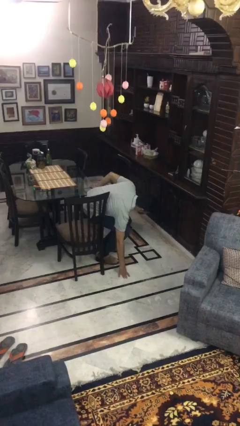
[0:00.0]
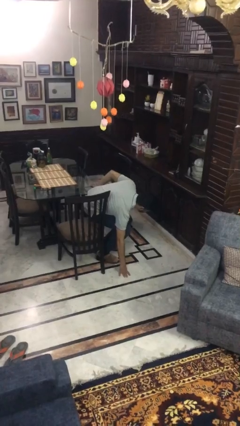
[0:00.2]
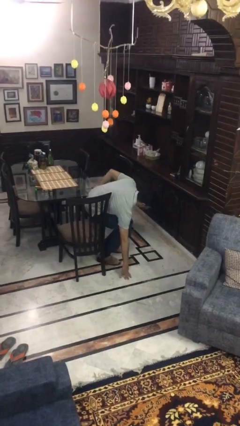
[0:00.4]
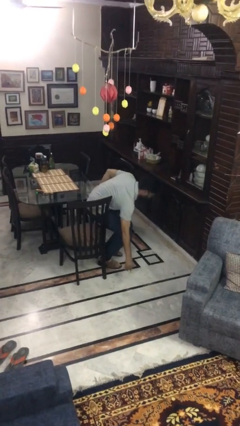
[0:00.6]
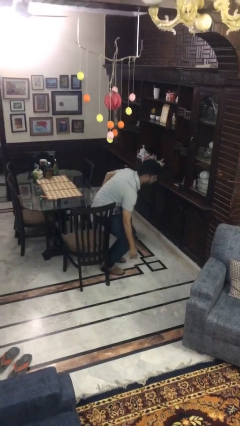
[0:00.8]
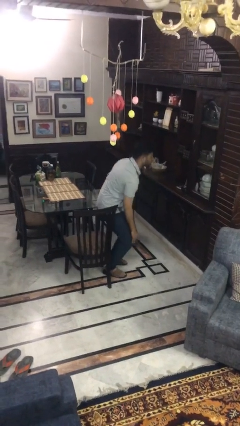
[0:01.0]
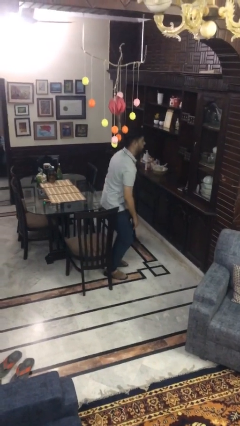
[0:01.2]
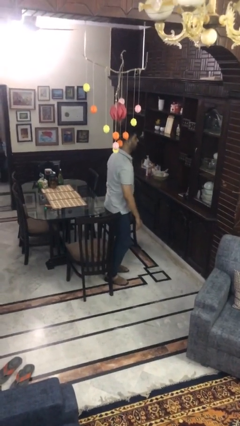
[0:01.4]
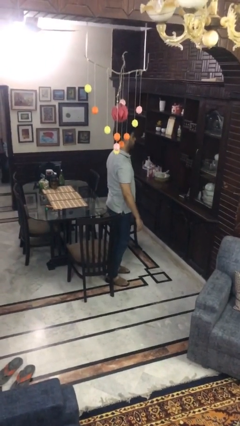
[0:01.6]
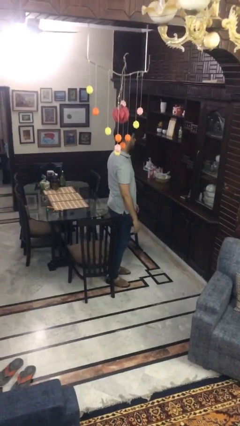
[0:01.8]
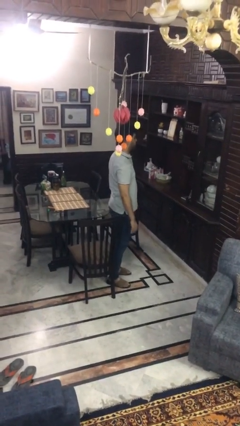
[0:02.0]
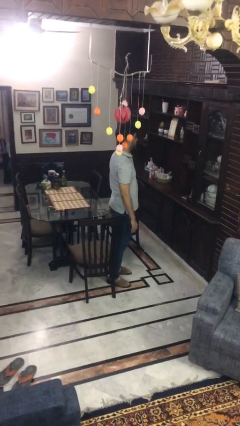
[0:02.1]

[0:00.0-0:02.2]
person stands up from floor

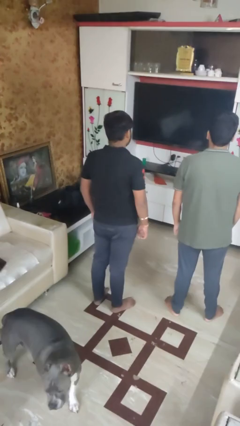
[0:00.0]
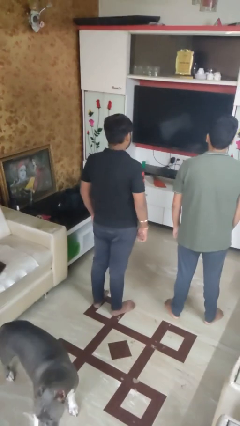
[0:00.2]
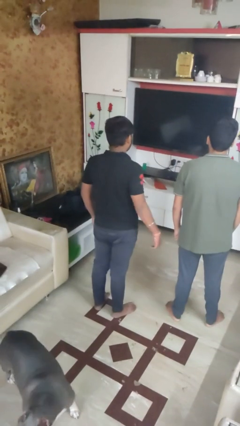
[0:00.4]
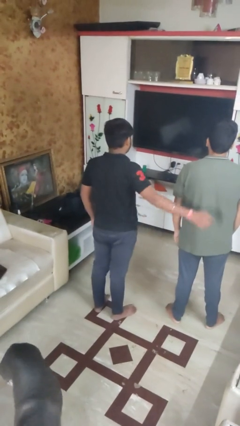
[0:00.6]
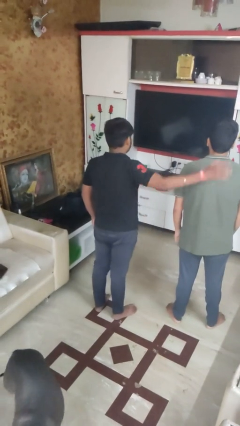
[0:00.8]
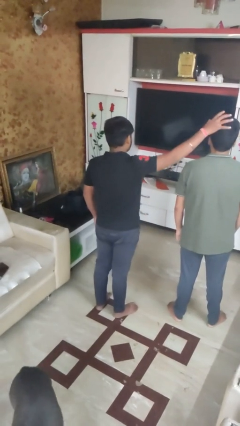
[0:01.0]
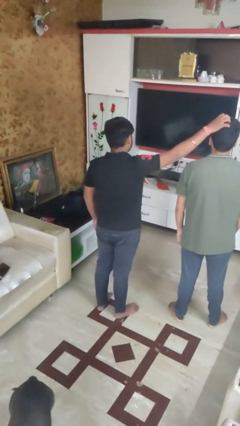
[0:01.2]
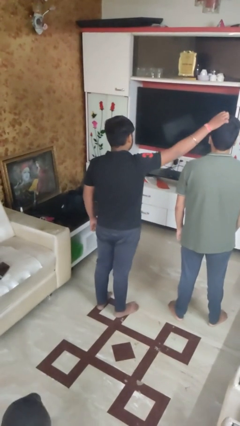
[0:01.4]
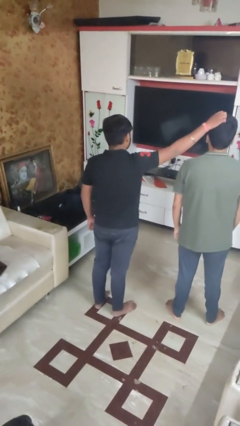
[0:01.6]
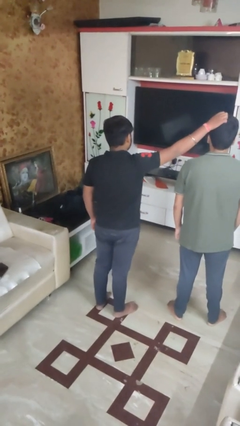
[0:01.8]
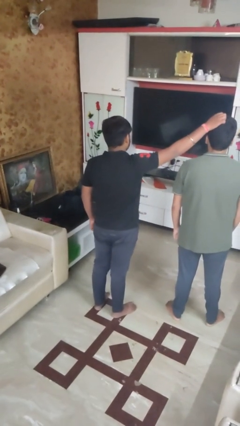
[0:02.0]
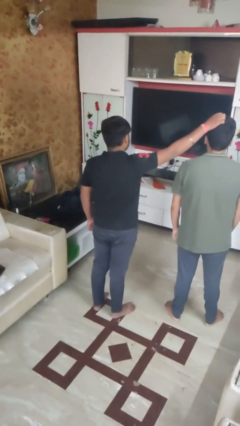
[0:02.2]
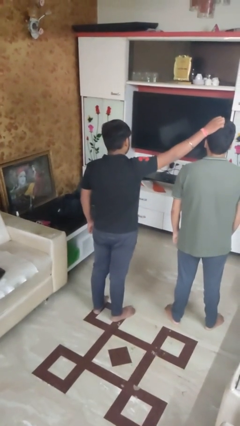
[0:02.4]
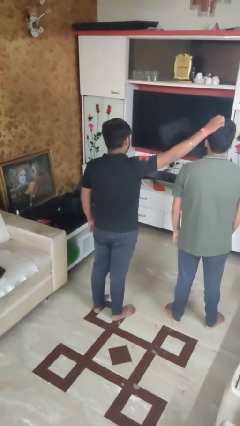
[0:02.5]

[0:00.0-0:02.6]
person grabs person by hair

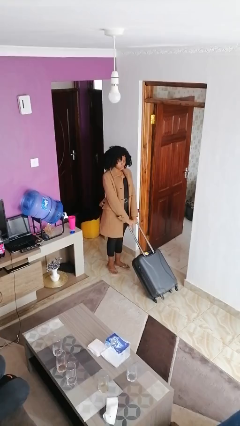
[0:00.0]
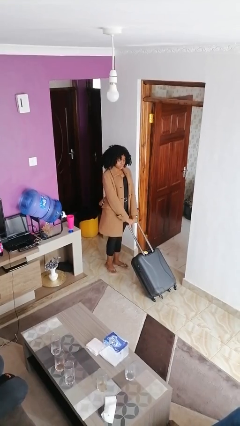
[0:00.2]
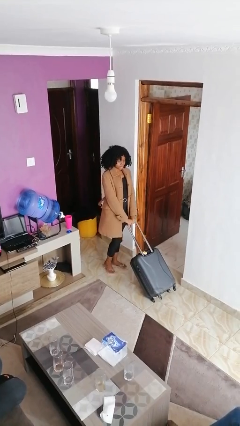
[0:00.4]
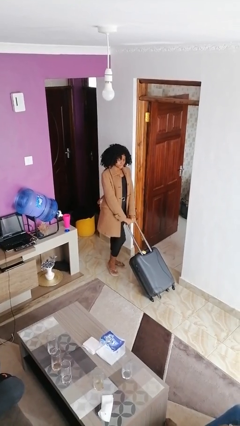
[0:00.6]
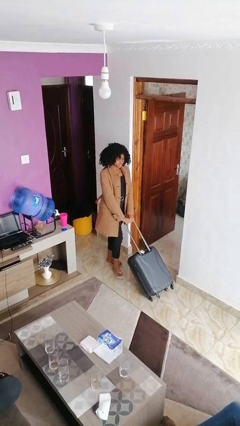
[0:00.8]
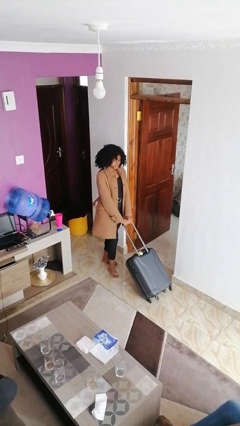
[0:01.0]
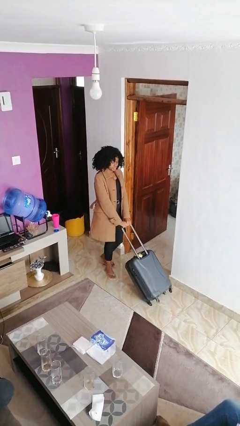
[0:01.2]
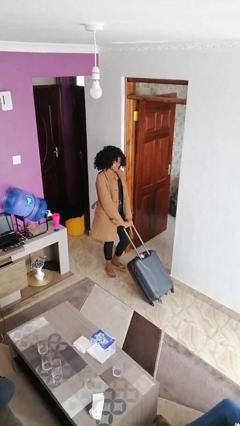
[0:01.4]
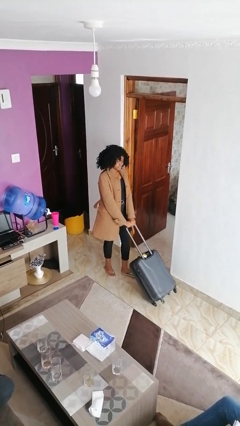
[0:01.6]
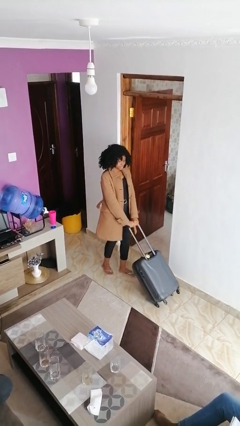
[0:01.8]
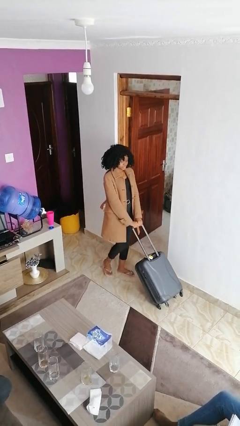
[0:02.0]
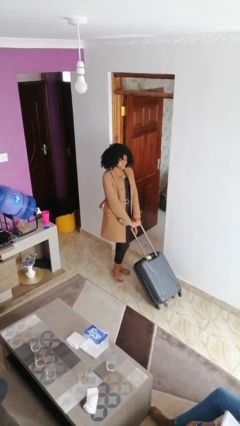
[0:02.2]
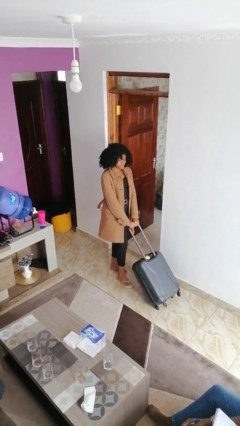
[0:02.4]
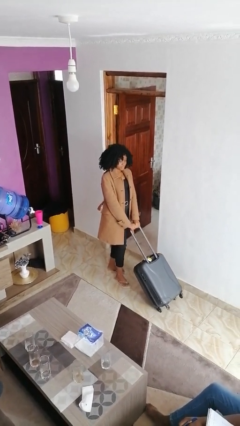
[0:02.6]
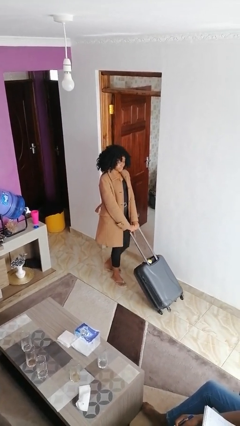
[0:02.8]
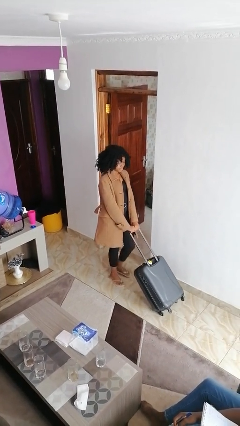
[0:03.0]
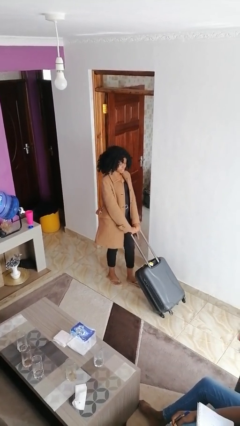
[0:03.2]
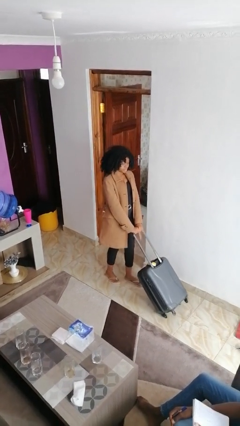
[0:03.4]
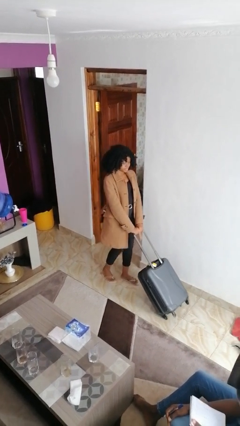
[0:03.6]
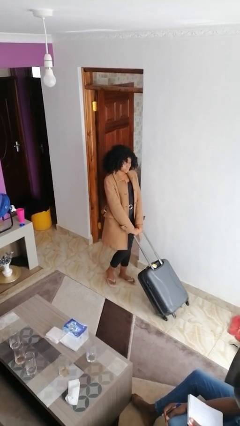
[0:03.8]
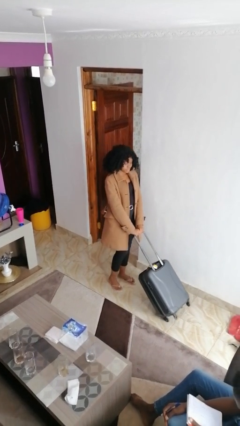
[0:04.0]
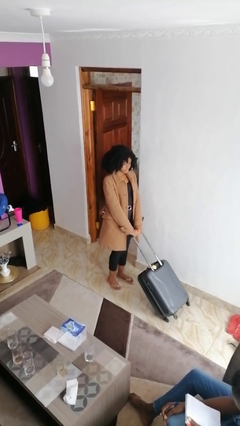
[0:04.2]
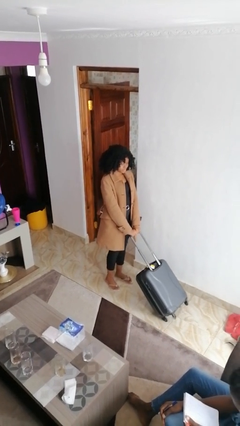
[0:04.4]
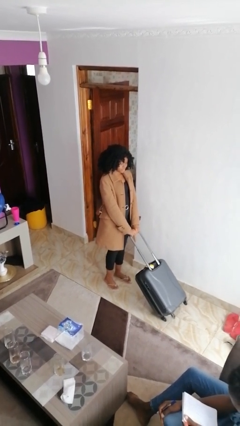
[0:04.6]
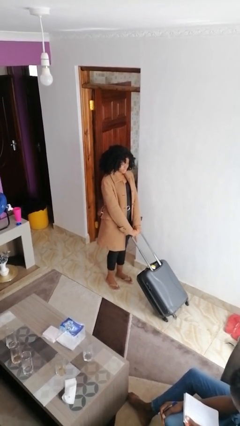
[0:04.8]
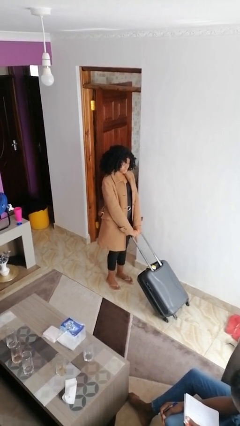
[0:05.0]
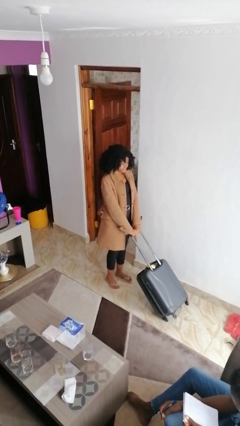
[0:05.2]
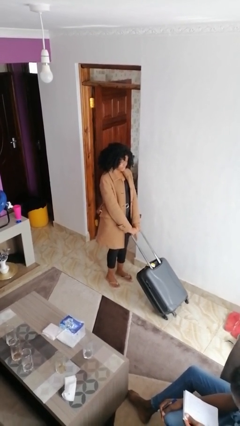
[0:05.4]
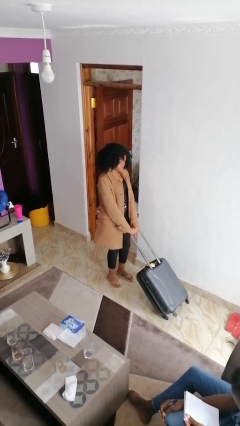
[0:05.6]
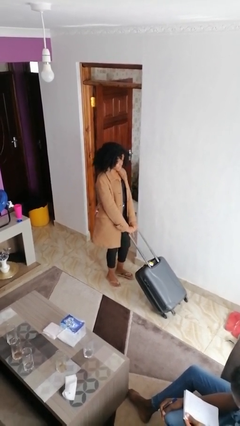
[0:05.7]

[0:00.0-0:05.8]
person pushes wheeled cart

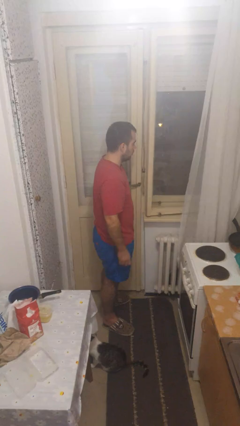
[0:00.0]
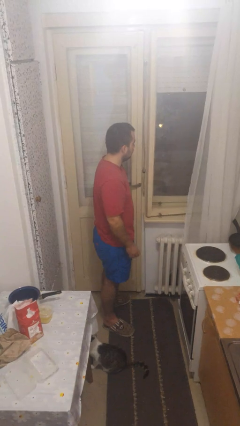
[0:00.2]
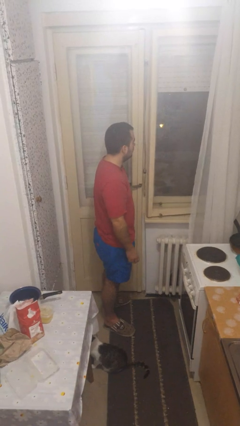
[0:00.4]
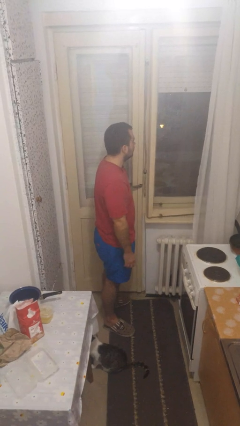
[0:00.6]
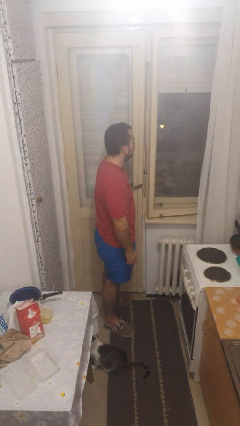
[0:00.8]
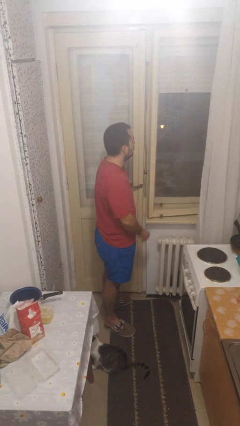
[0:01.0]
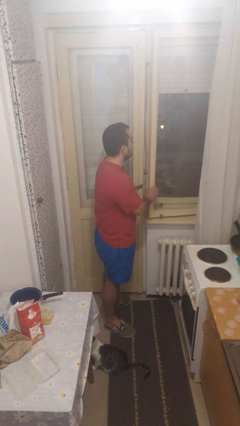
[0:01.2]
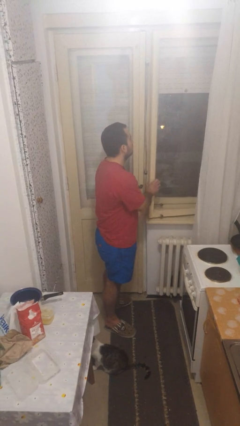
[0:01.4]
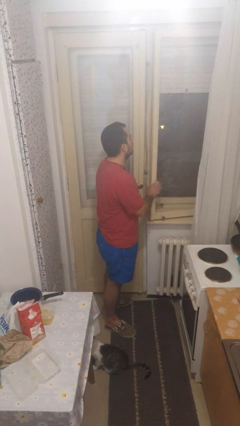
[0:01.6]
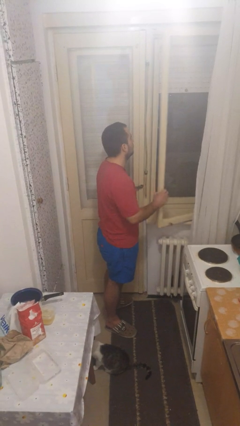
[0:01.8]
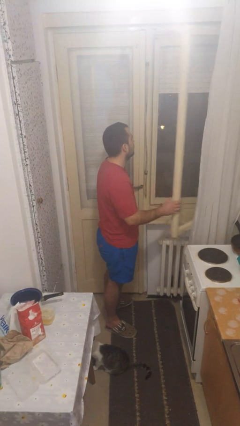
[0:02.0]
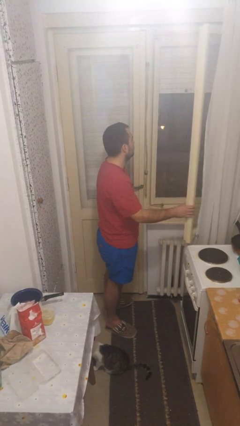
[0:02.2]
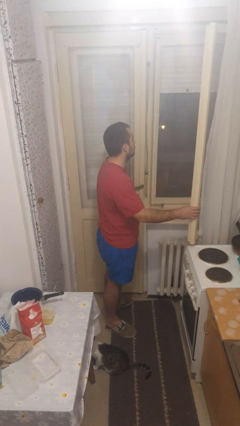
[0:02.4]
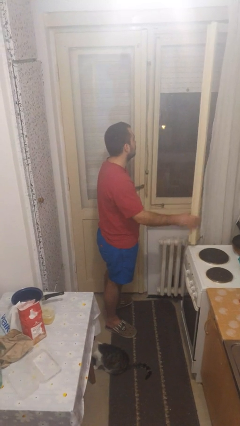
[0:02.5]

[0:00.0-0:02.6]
person opens home window

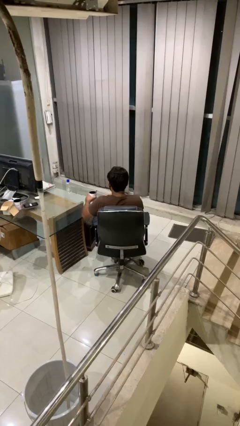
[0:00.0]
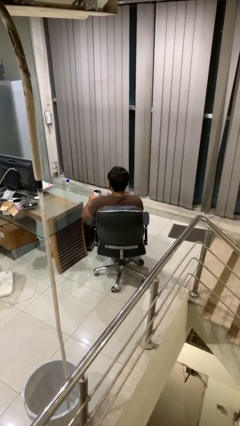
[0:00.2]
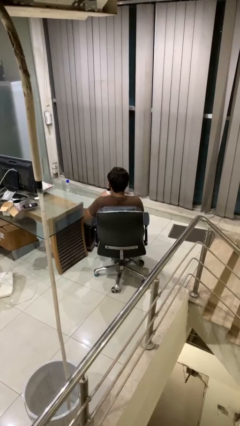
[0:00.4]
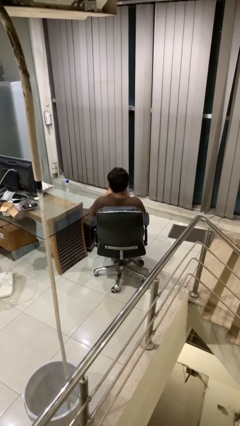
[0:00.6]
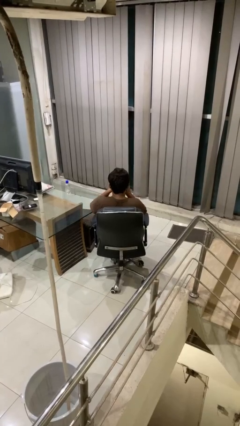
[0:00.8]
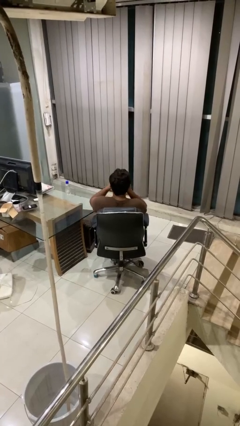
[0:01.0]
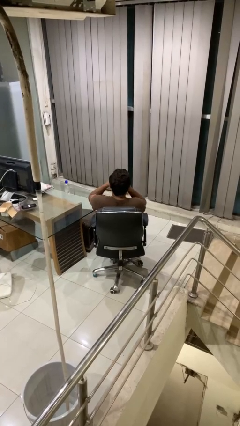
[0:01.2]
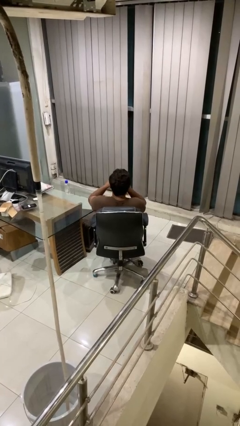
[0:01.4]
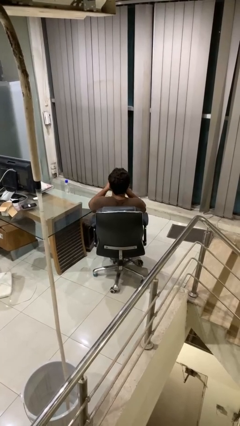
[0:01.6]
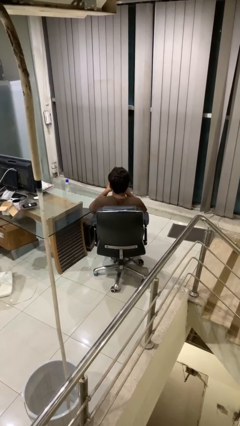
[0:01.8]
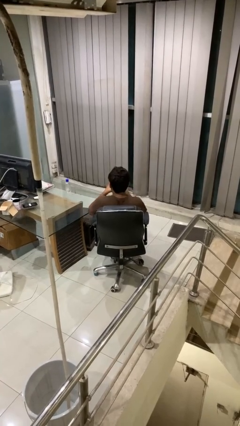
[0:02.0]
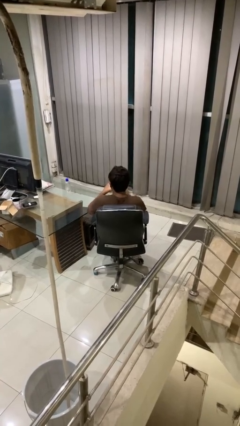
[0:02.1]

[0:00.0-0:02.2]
person drinks from mug

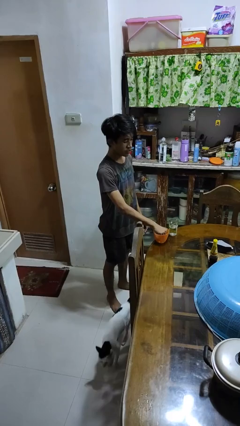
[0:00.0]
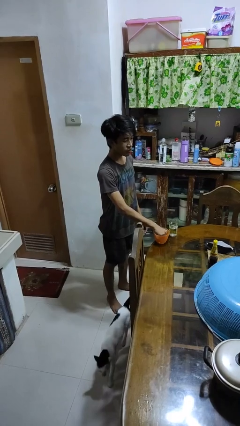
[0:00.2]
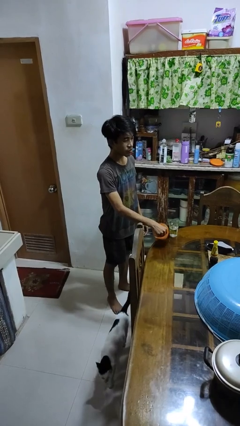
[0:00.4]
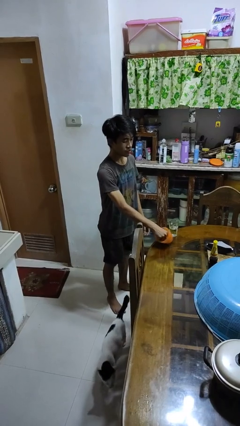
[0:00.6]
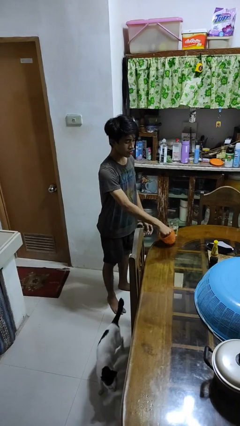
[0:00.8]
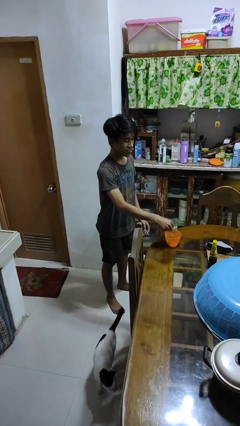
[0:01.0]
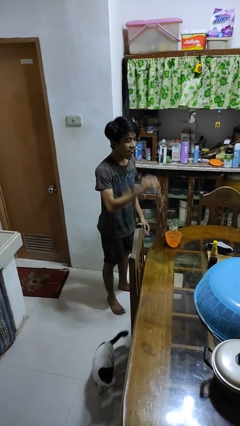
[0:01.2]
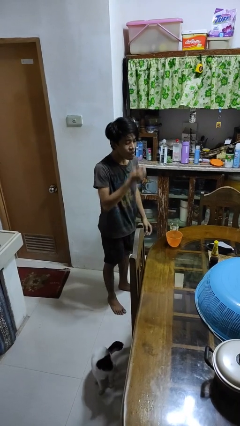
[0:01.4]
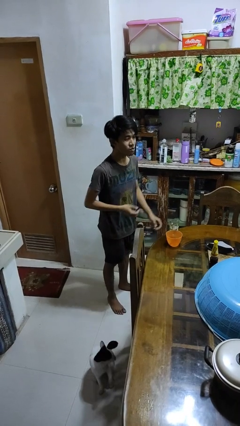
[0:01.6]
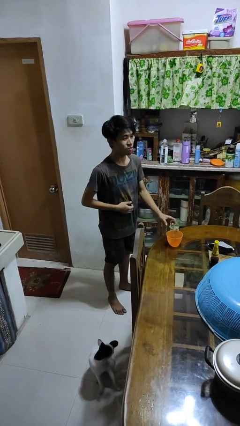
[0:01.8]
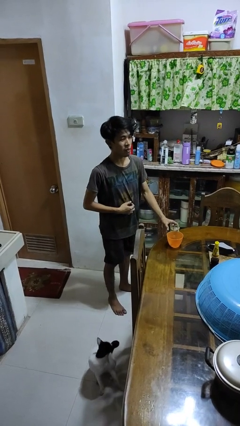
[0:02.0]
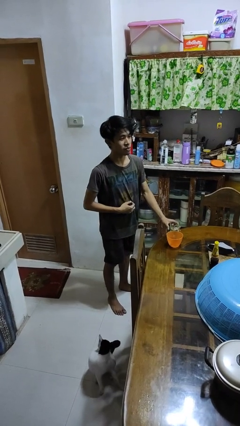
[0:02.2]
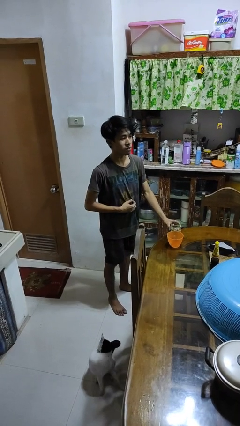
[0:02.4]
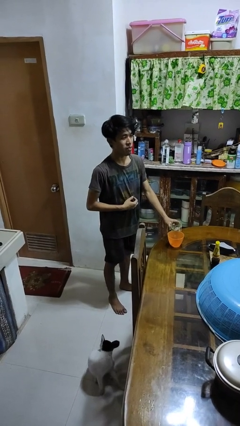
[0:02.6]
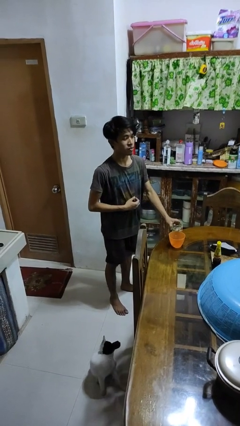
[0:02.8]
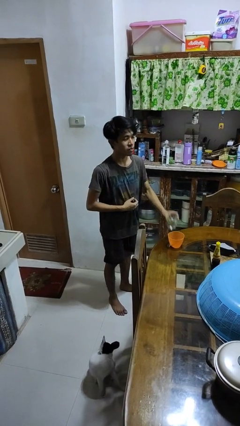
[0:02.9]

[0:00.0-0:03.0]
person takes medicine pills
